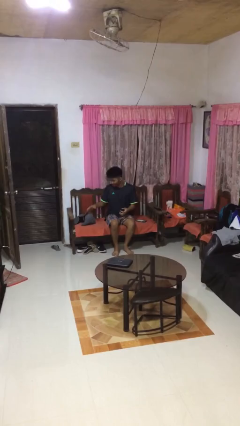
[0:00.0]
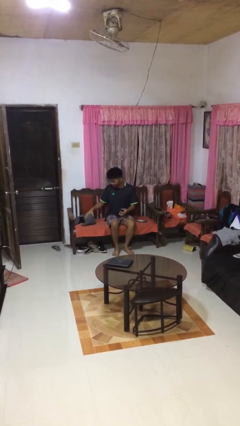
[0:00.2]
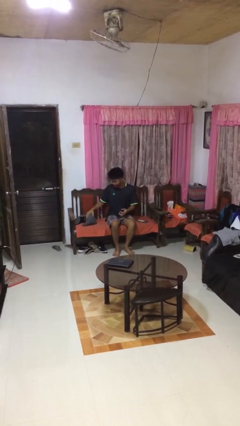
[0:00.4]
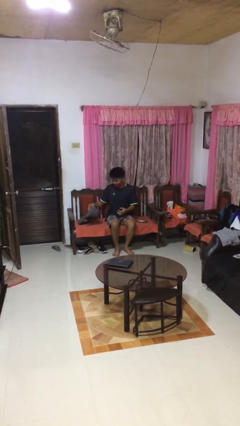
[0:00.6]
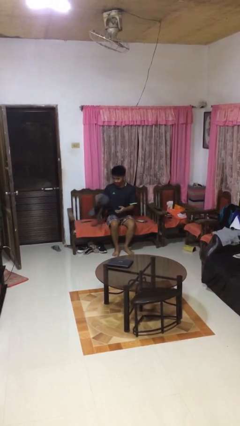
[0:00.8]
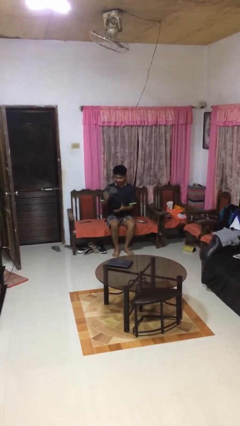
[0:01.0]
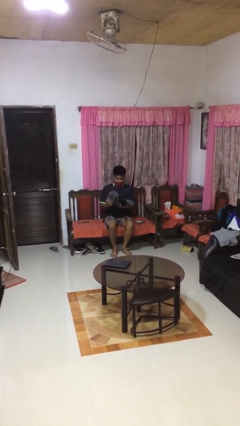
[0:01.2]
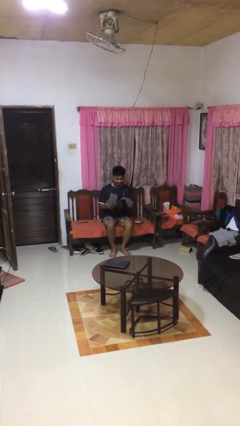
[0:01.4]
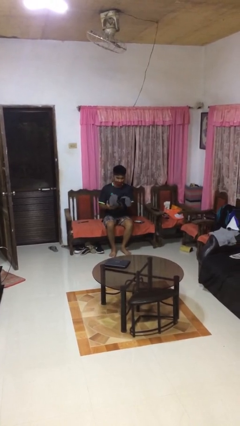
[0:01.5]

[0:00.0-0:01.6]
person picks up object from floor

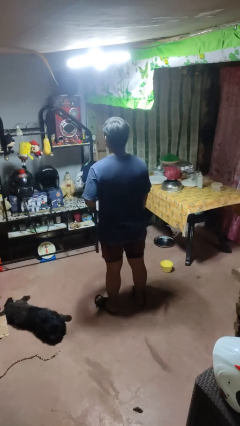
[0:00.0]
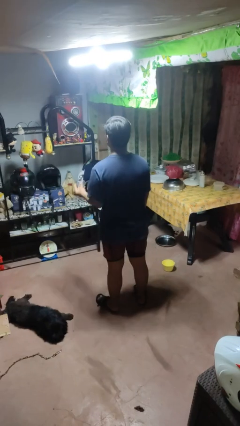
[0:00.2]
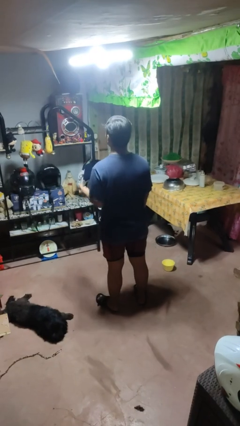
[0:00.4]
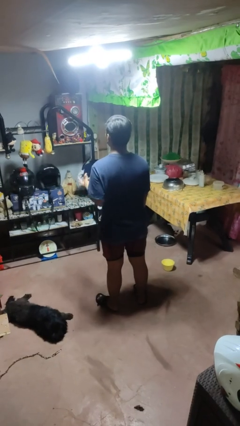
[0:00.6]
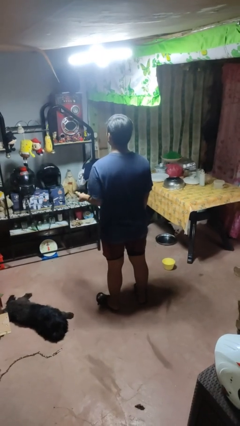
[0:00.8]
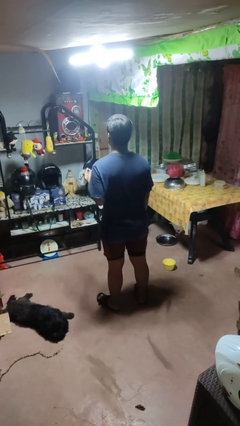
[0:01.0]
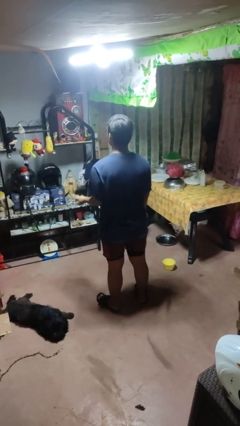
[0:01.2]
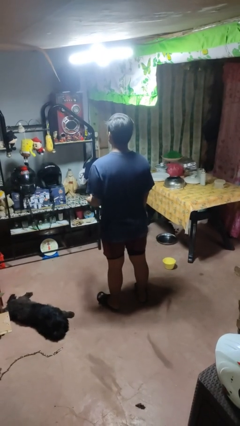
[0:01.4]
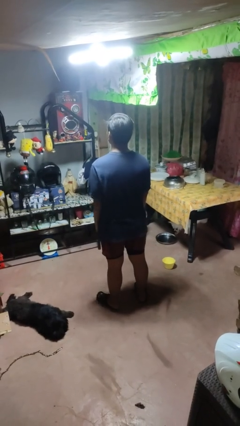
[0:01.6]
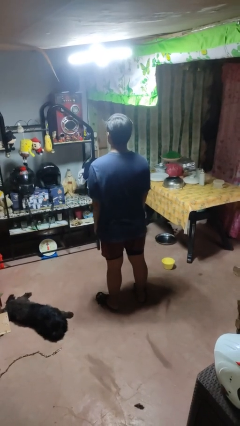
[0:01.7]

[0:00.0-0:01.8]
person snaps fingers

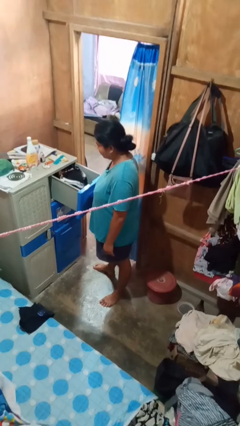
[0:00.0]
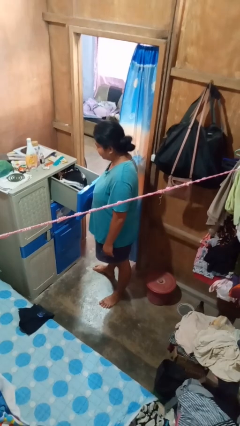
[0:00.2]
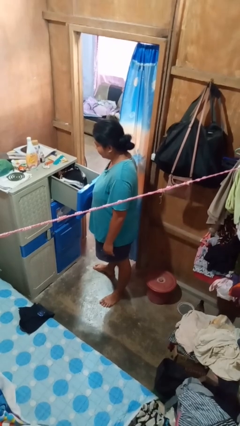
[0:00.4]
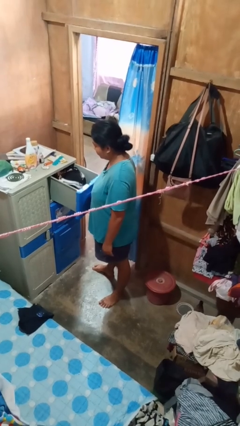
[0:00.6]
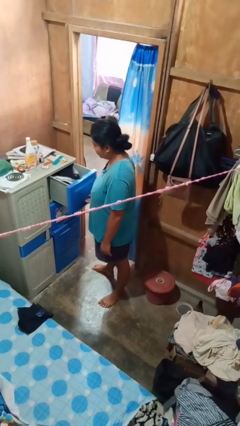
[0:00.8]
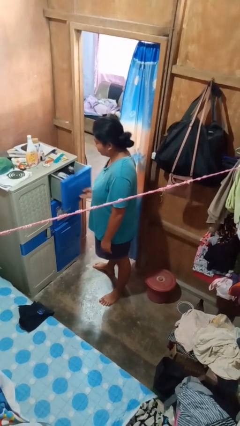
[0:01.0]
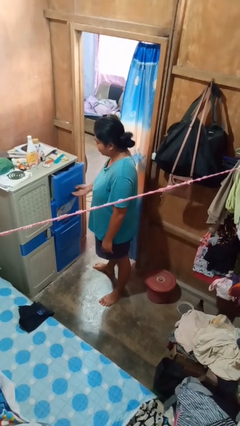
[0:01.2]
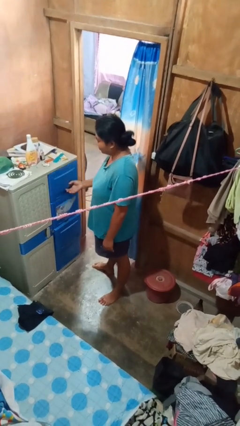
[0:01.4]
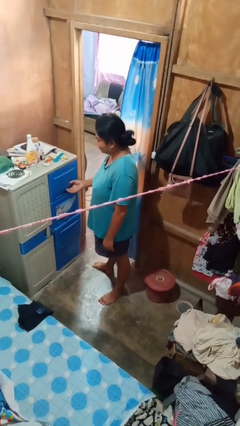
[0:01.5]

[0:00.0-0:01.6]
person closes dresser drawer

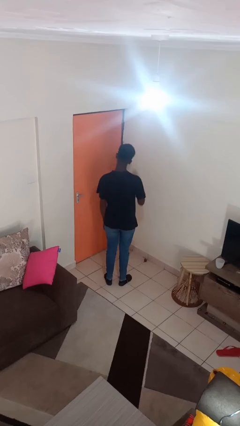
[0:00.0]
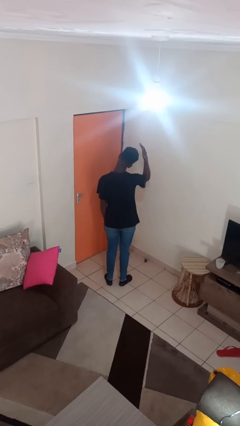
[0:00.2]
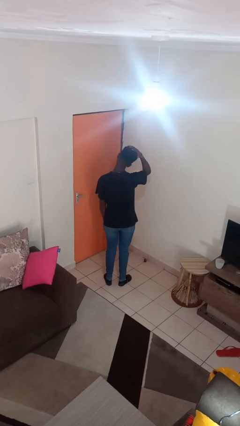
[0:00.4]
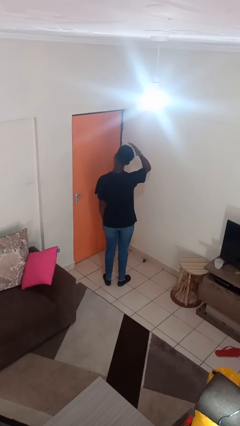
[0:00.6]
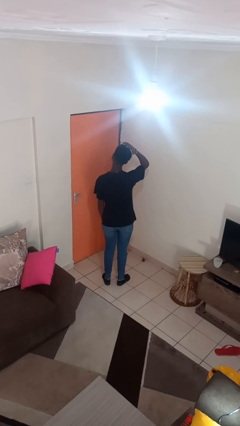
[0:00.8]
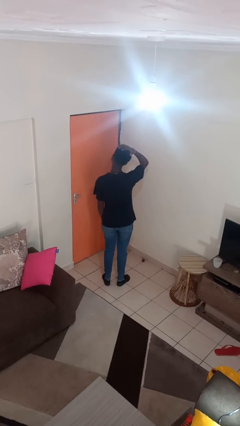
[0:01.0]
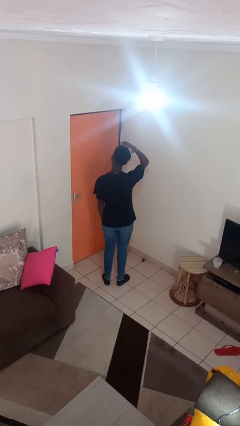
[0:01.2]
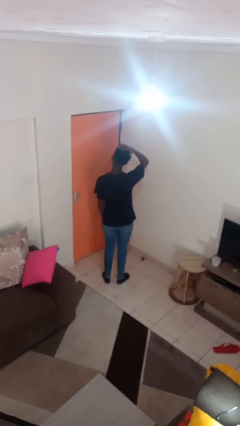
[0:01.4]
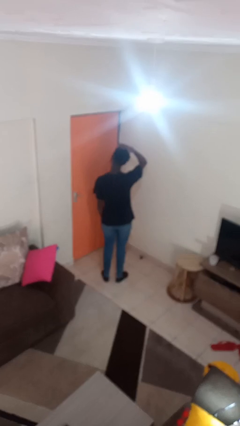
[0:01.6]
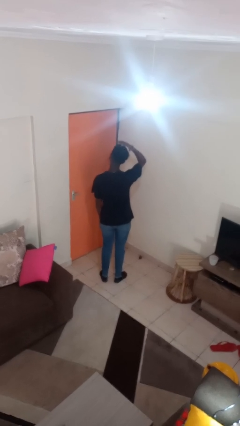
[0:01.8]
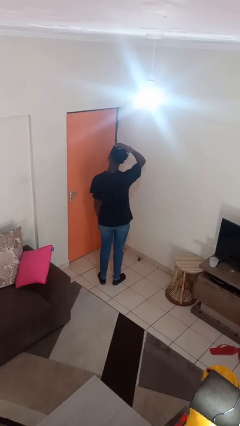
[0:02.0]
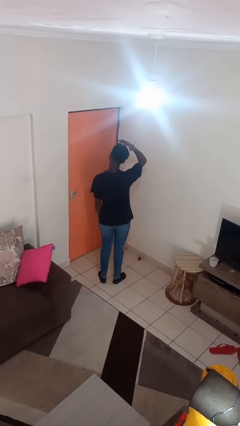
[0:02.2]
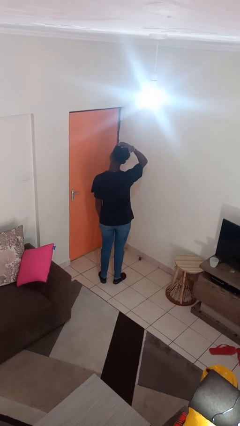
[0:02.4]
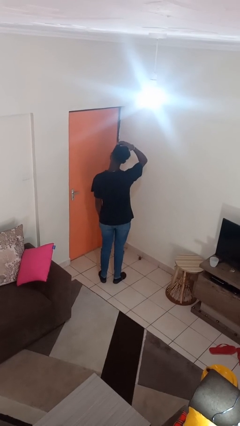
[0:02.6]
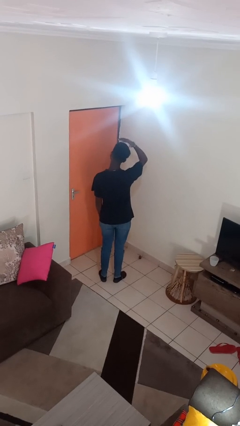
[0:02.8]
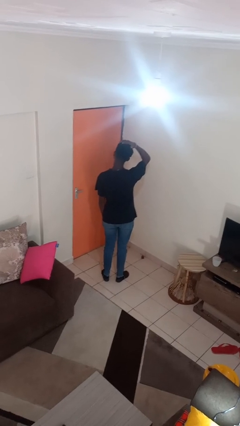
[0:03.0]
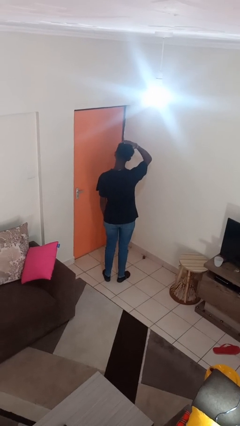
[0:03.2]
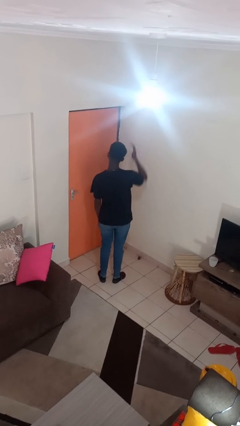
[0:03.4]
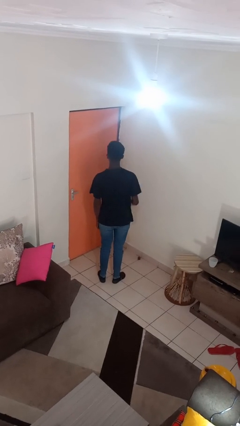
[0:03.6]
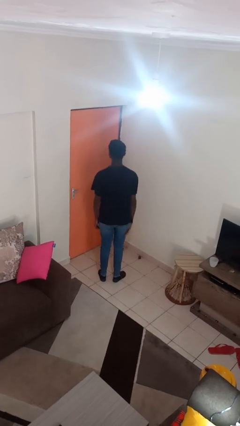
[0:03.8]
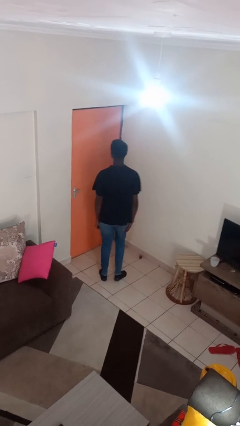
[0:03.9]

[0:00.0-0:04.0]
person pats head

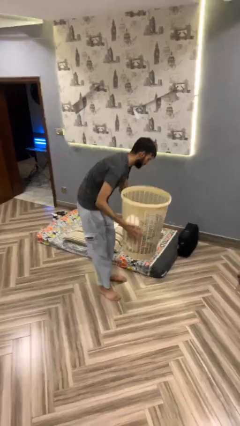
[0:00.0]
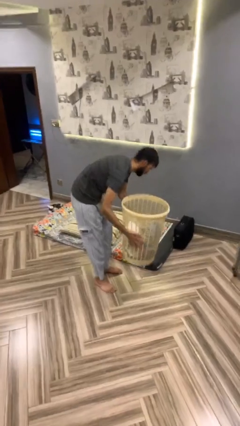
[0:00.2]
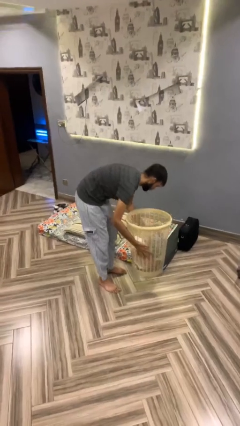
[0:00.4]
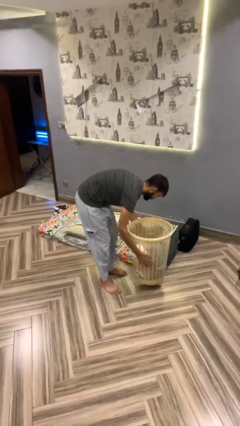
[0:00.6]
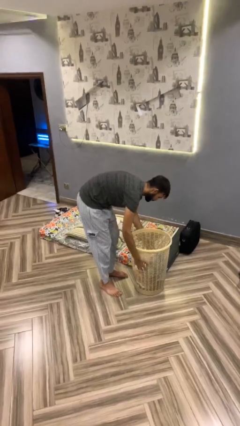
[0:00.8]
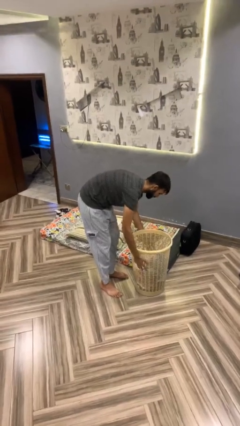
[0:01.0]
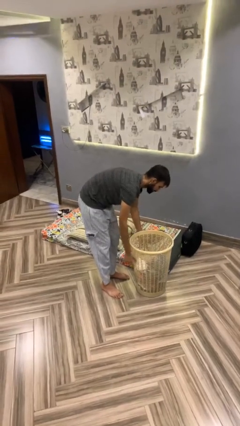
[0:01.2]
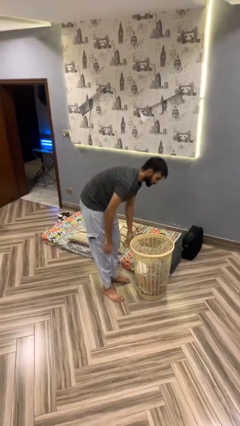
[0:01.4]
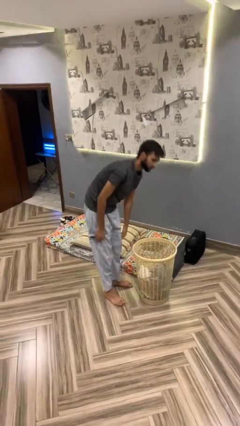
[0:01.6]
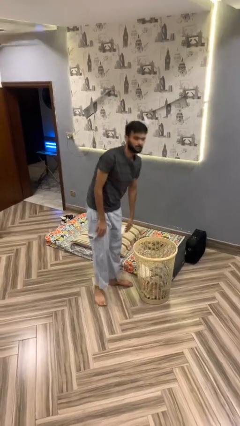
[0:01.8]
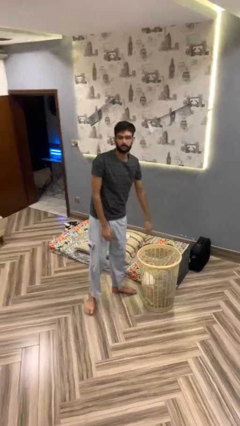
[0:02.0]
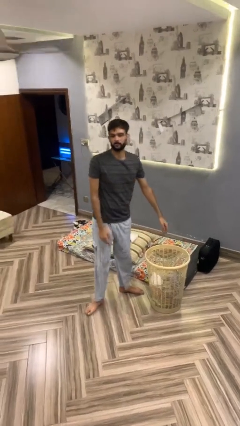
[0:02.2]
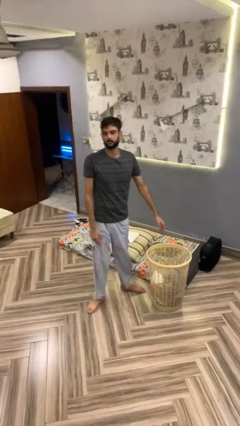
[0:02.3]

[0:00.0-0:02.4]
person puts down object on floor

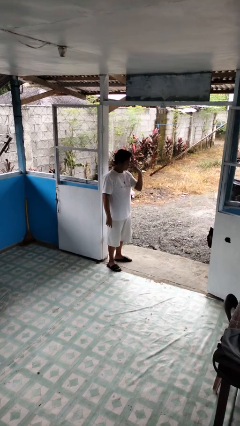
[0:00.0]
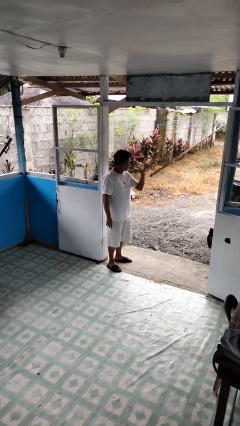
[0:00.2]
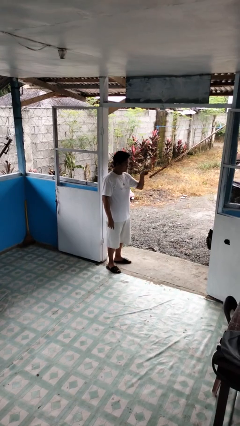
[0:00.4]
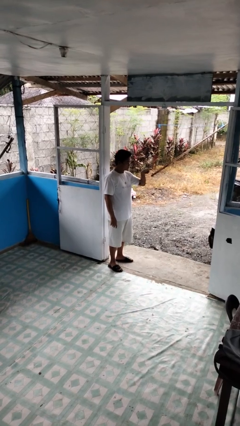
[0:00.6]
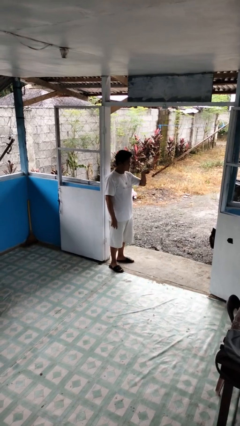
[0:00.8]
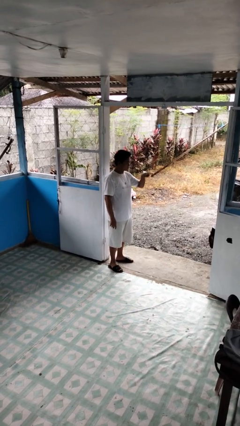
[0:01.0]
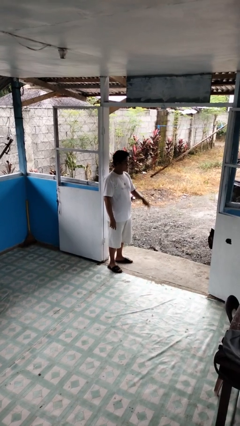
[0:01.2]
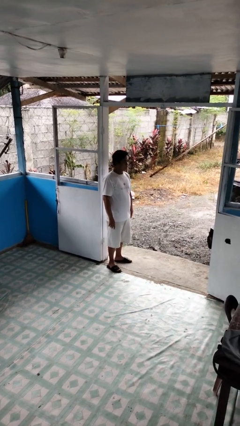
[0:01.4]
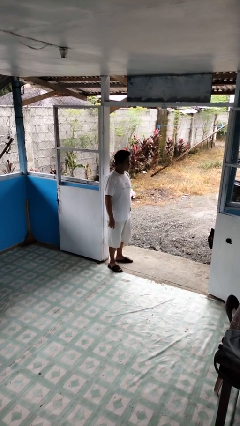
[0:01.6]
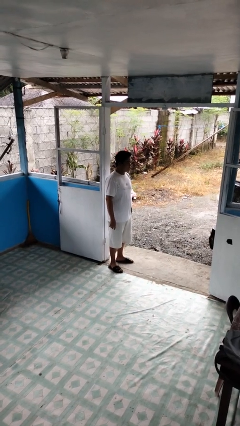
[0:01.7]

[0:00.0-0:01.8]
person gestures watch closely

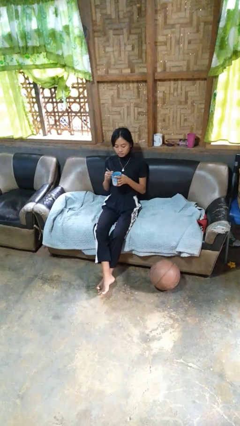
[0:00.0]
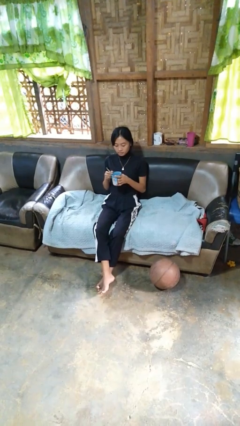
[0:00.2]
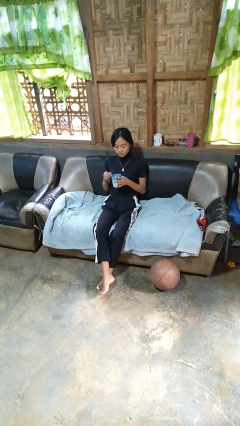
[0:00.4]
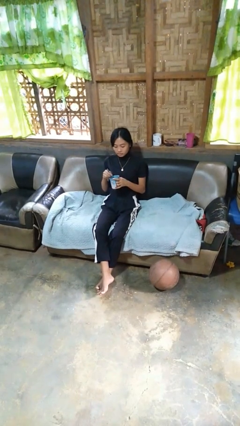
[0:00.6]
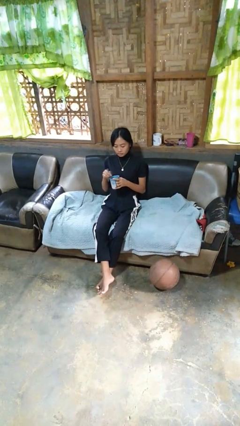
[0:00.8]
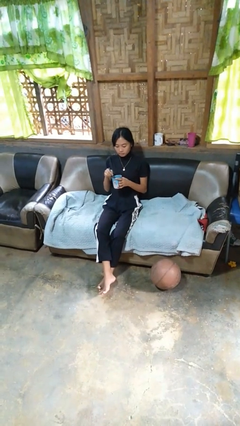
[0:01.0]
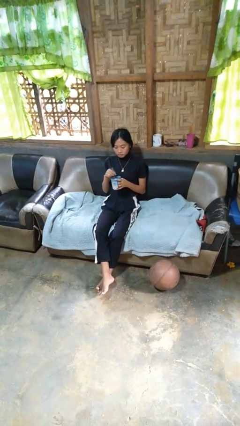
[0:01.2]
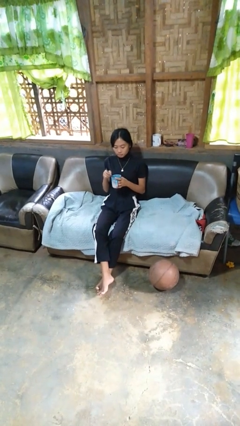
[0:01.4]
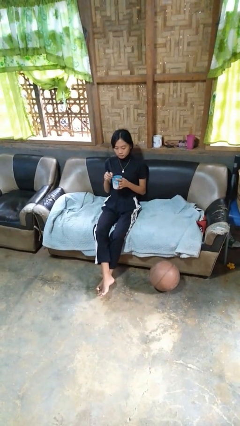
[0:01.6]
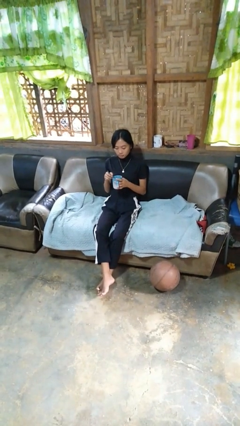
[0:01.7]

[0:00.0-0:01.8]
person stirs mug

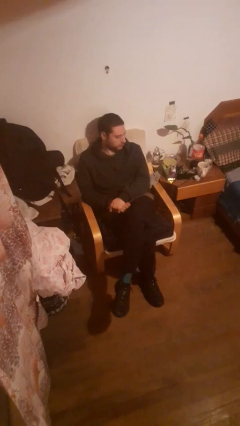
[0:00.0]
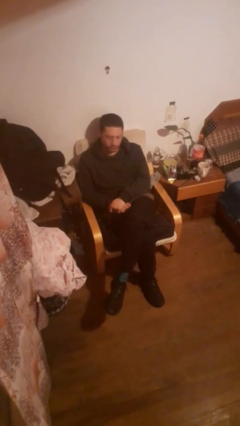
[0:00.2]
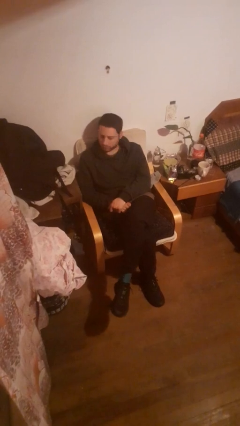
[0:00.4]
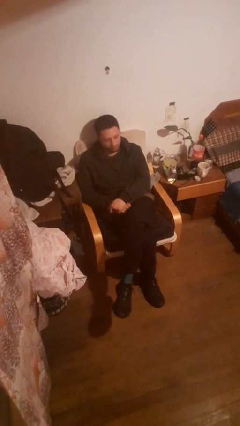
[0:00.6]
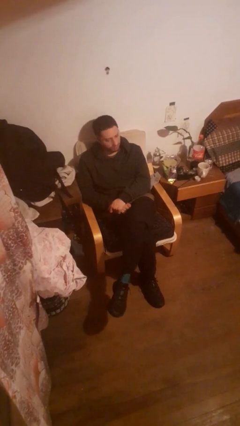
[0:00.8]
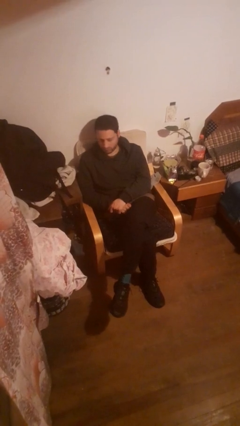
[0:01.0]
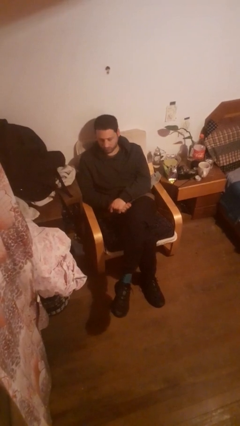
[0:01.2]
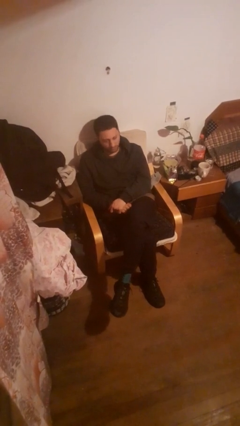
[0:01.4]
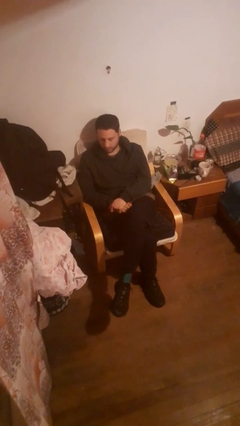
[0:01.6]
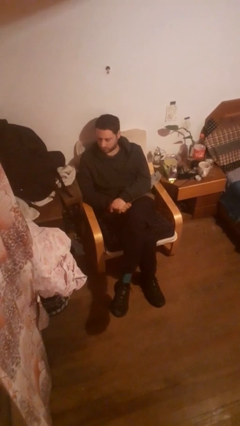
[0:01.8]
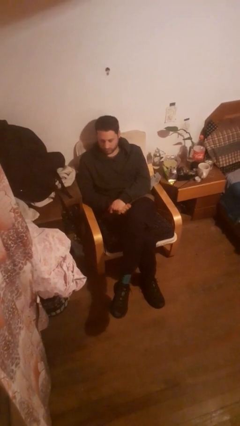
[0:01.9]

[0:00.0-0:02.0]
person shakes head
